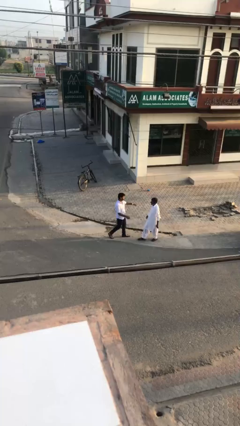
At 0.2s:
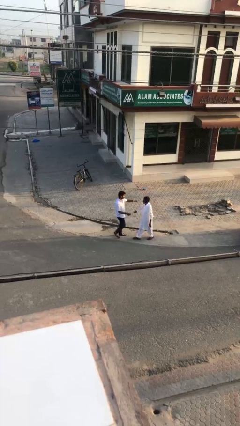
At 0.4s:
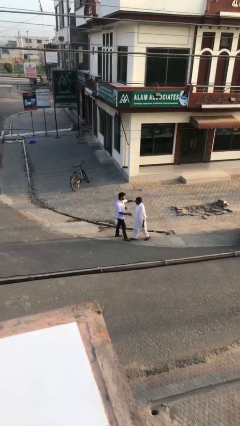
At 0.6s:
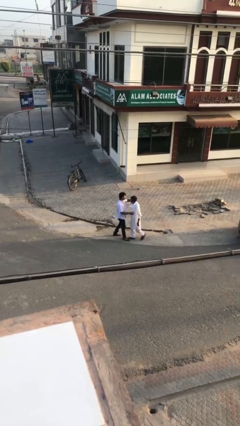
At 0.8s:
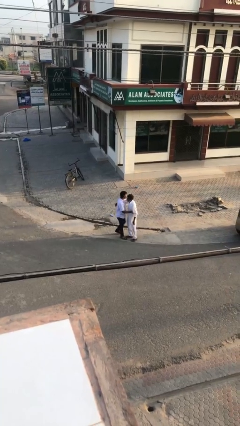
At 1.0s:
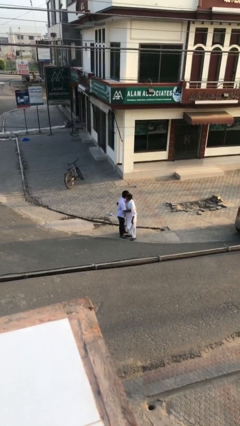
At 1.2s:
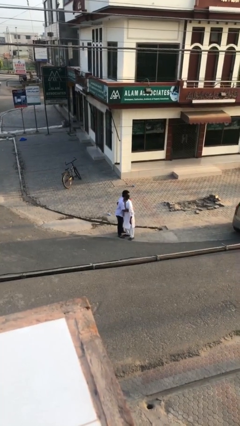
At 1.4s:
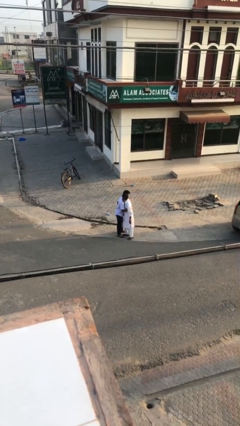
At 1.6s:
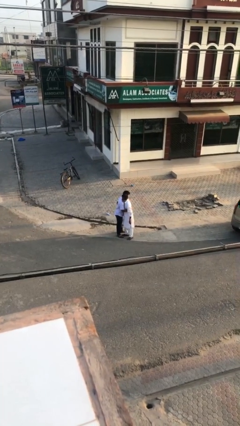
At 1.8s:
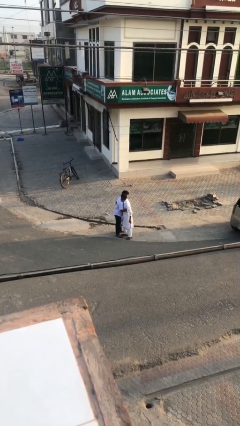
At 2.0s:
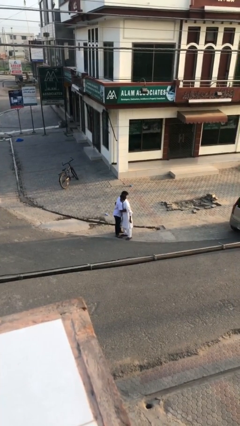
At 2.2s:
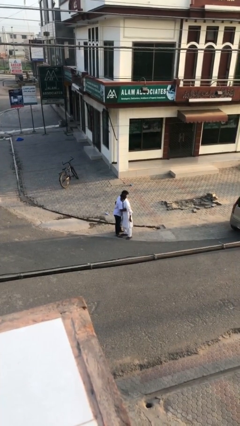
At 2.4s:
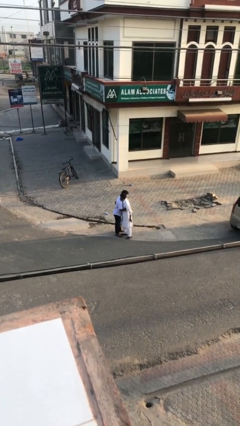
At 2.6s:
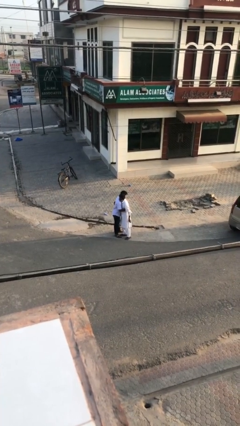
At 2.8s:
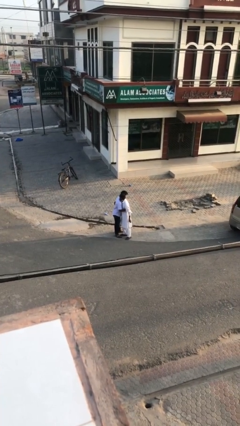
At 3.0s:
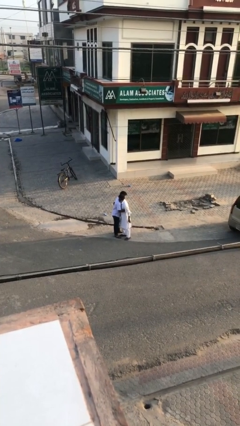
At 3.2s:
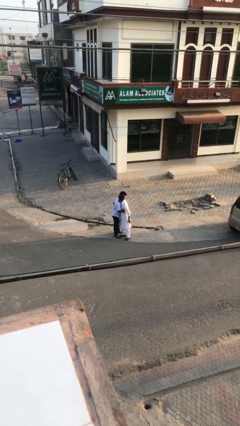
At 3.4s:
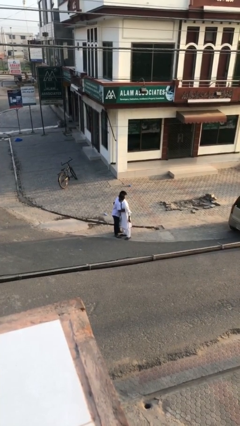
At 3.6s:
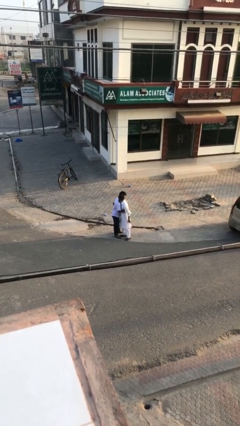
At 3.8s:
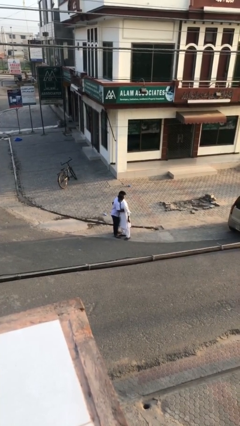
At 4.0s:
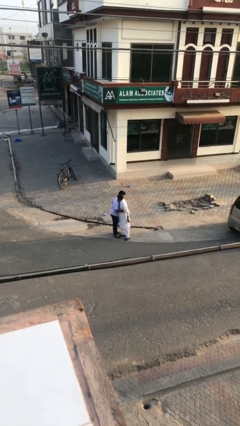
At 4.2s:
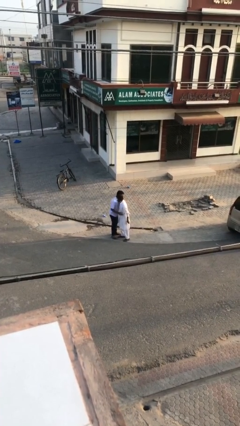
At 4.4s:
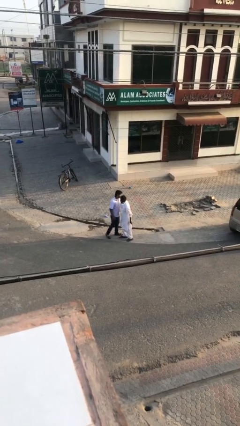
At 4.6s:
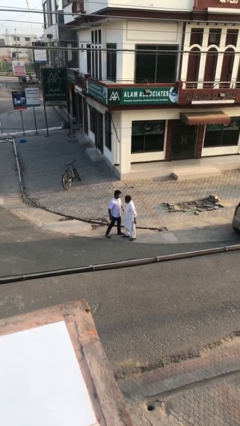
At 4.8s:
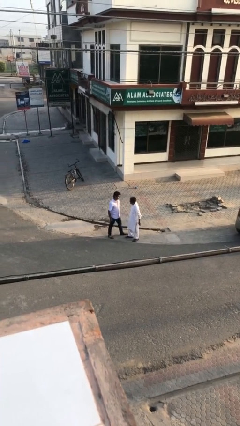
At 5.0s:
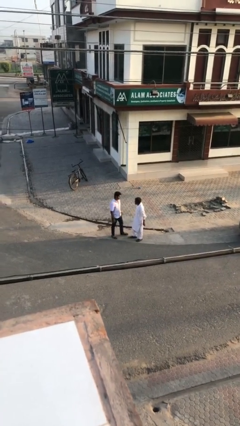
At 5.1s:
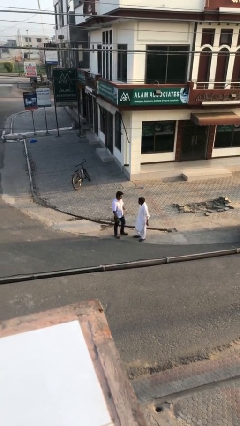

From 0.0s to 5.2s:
person embraces person

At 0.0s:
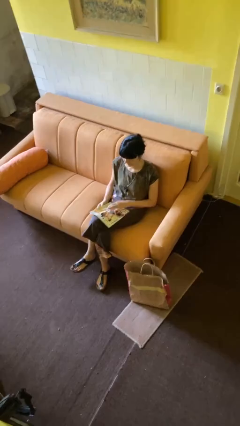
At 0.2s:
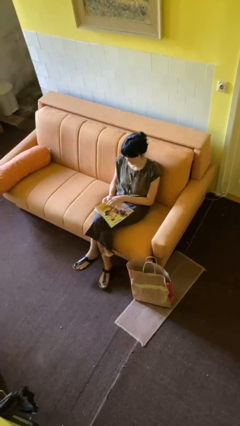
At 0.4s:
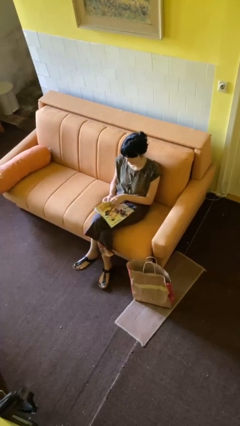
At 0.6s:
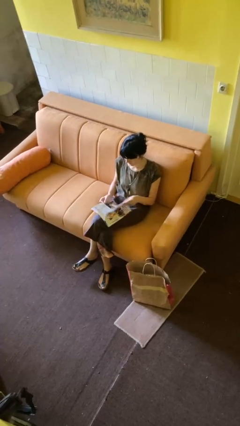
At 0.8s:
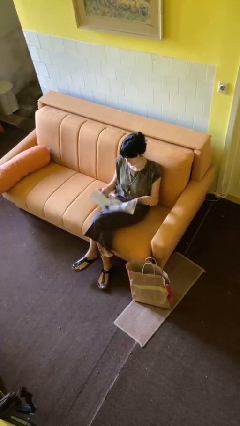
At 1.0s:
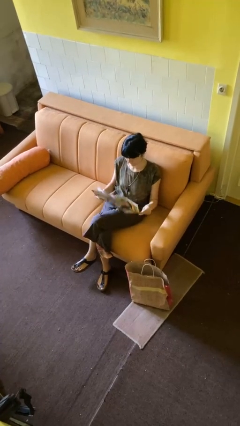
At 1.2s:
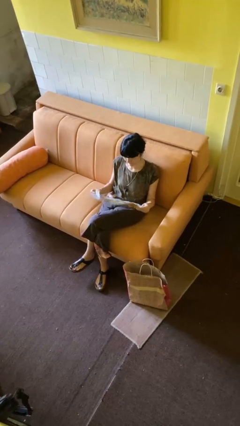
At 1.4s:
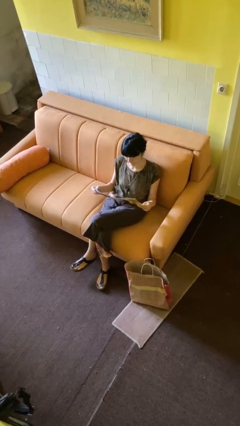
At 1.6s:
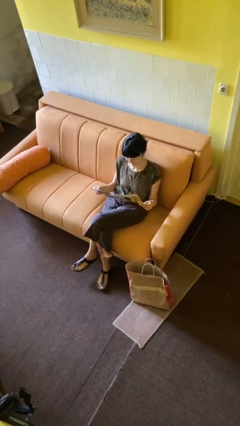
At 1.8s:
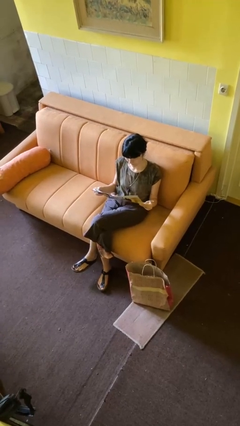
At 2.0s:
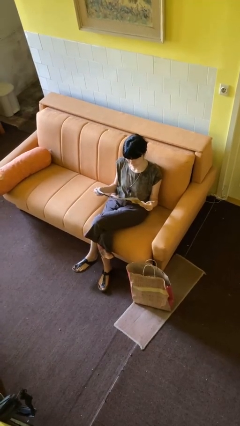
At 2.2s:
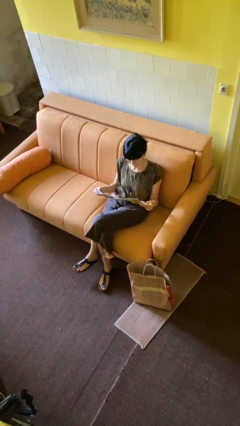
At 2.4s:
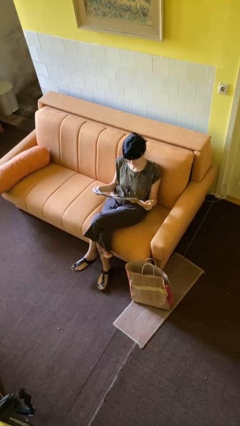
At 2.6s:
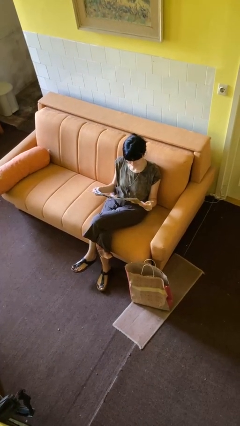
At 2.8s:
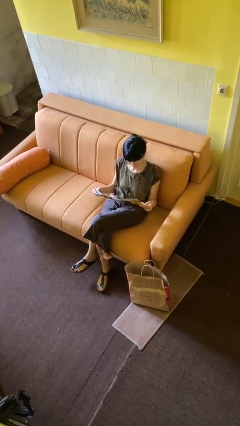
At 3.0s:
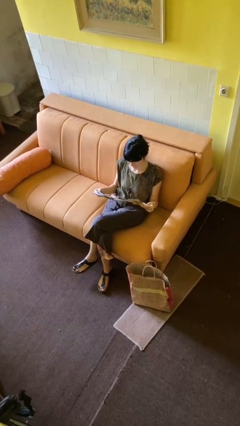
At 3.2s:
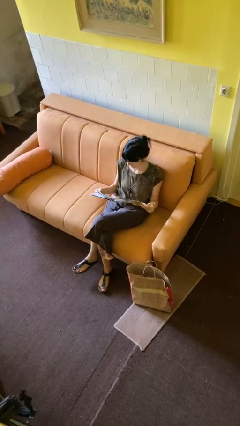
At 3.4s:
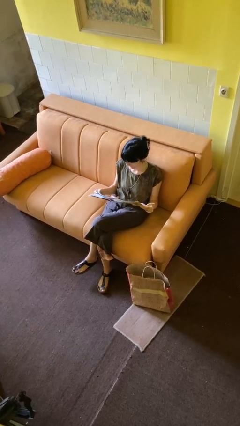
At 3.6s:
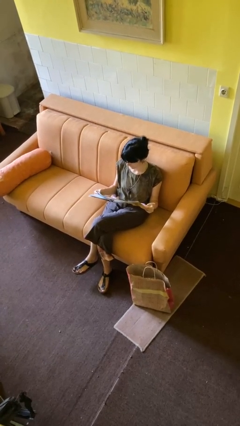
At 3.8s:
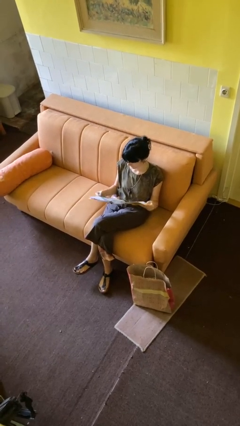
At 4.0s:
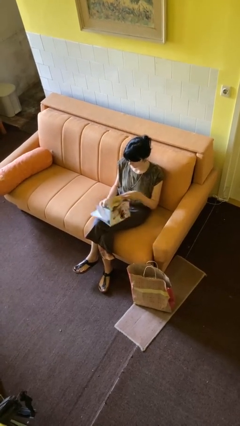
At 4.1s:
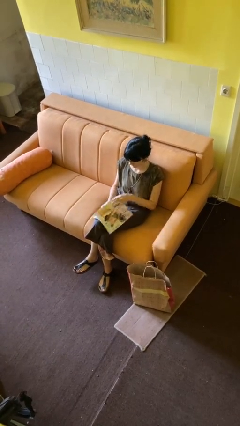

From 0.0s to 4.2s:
person reads magazine

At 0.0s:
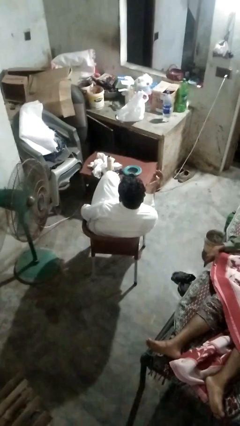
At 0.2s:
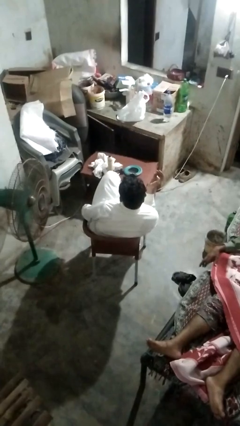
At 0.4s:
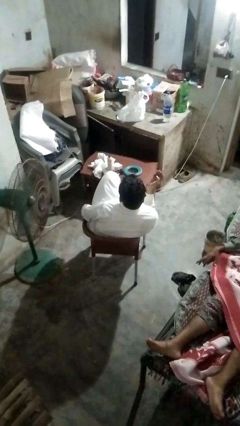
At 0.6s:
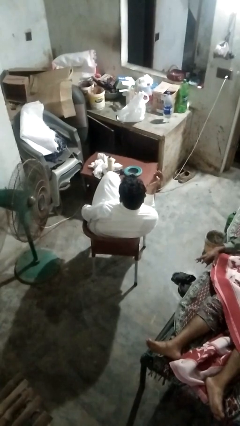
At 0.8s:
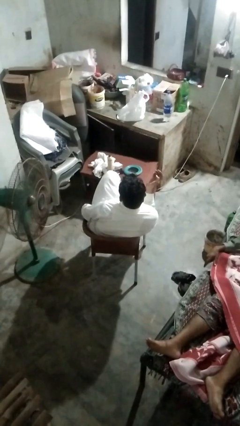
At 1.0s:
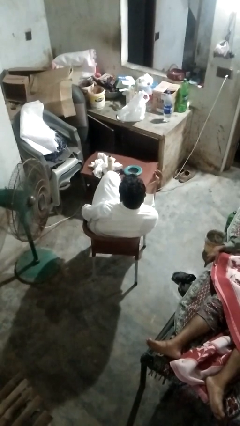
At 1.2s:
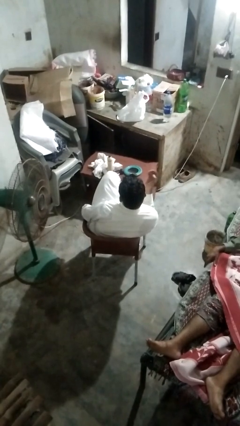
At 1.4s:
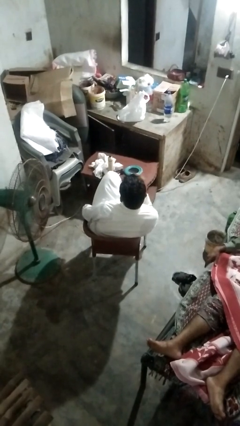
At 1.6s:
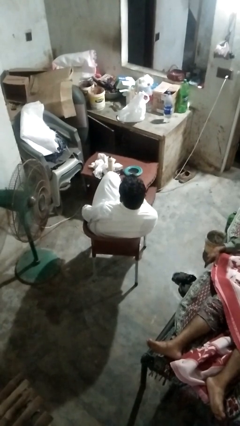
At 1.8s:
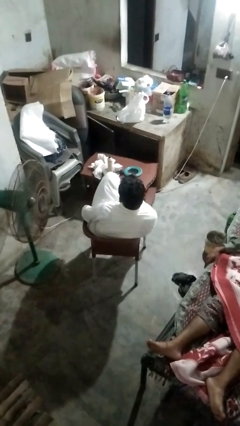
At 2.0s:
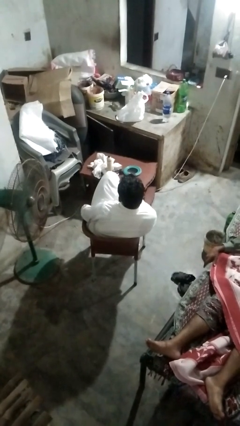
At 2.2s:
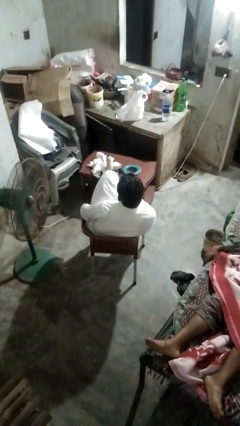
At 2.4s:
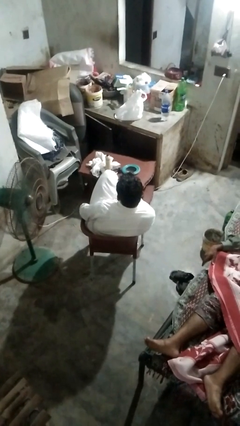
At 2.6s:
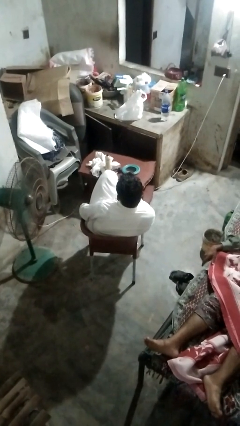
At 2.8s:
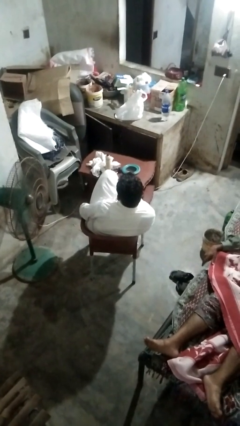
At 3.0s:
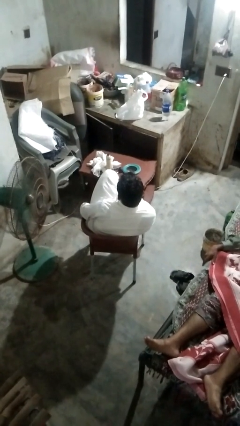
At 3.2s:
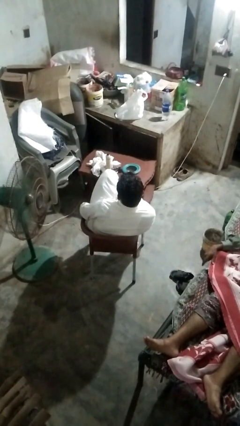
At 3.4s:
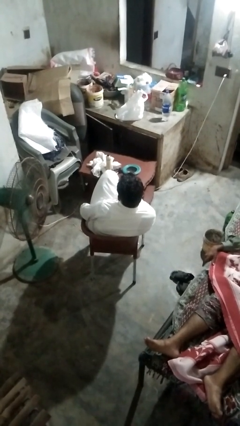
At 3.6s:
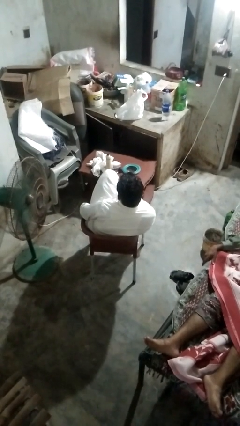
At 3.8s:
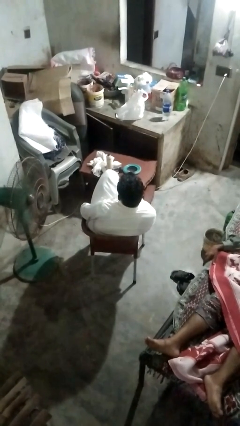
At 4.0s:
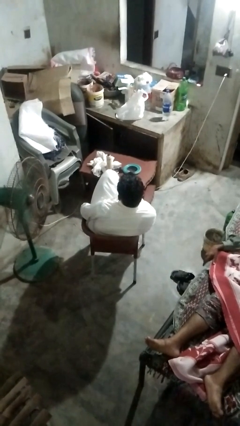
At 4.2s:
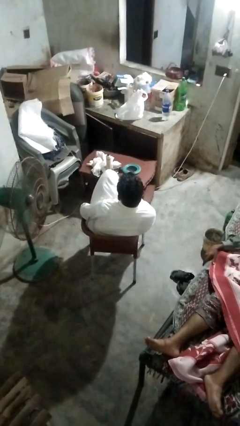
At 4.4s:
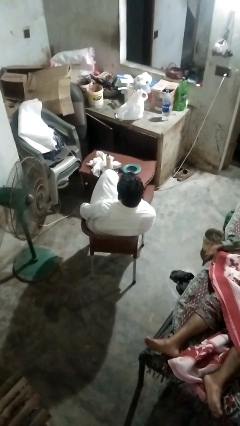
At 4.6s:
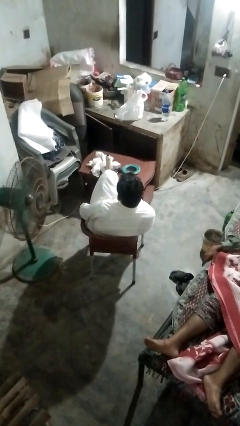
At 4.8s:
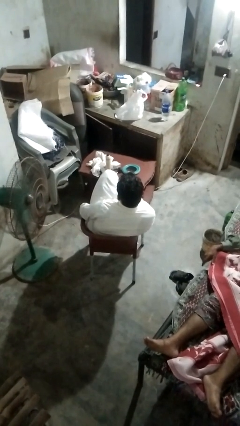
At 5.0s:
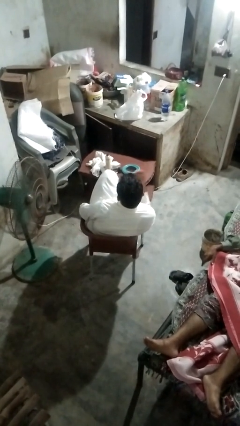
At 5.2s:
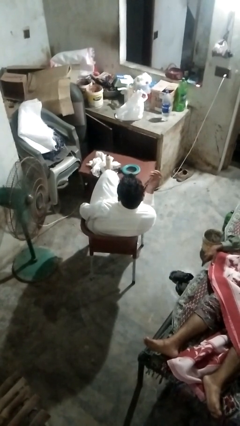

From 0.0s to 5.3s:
person licks fingers

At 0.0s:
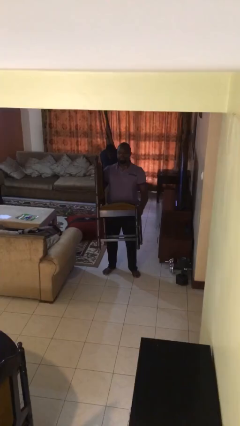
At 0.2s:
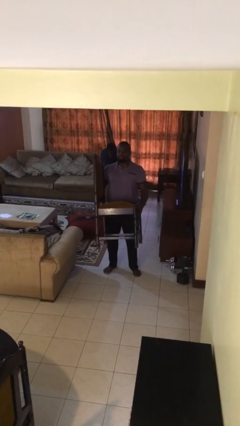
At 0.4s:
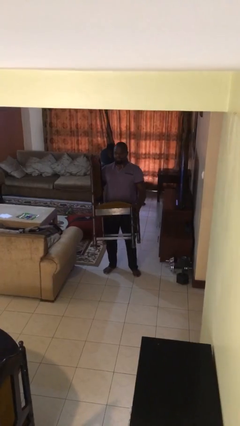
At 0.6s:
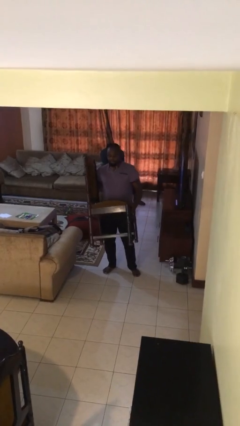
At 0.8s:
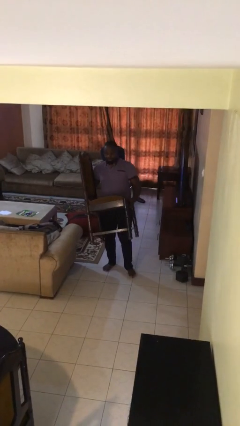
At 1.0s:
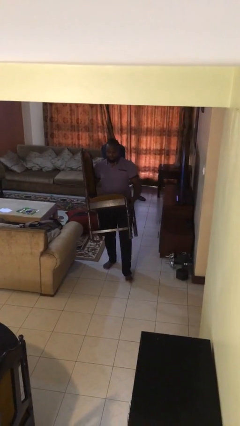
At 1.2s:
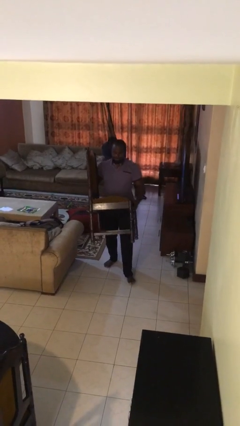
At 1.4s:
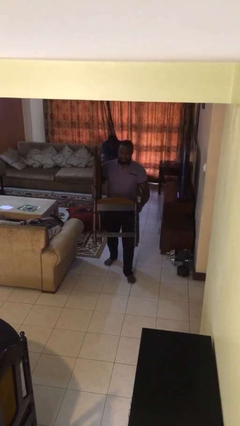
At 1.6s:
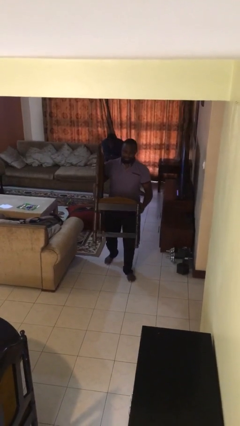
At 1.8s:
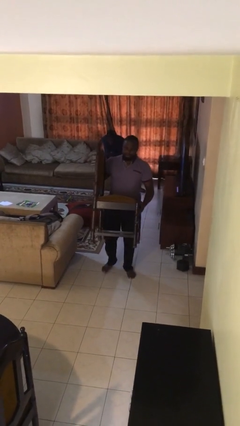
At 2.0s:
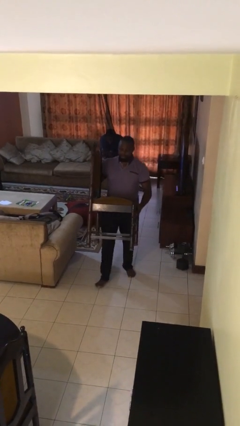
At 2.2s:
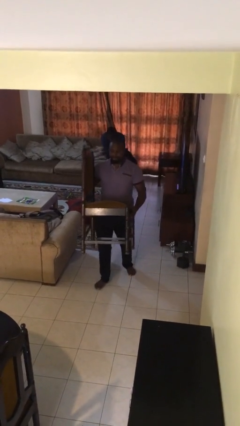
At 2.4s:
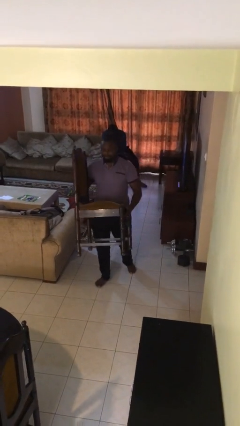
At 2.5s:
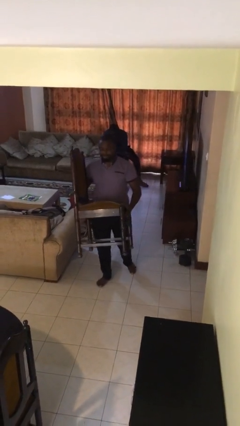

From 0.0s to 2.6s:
person carries heavy object

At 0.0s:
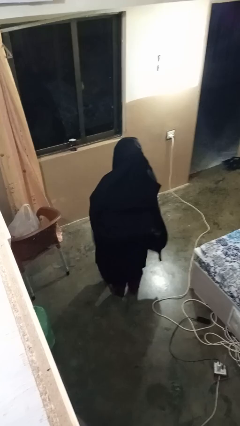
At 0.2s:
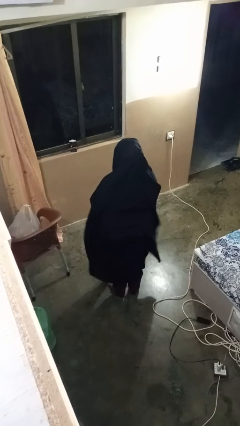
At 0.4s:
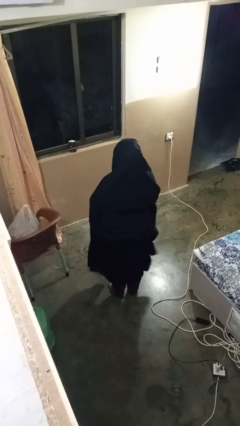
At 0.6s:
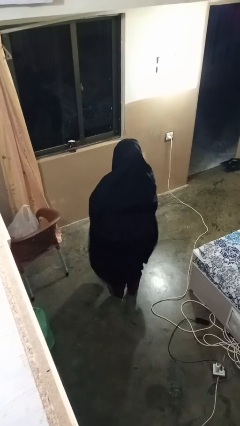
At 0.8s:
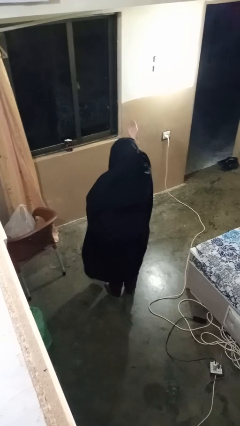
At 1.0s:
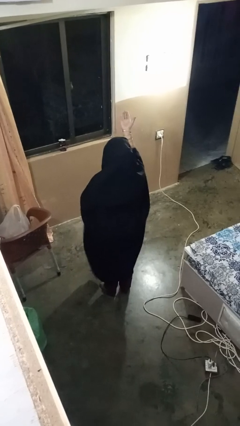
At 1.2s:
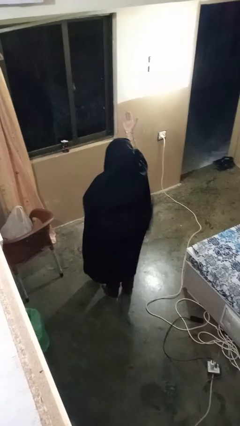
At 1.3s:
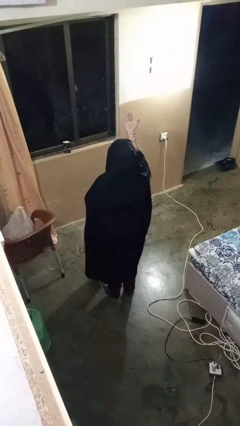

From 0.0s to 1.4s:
person gestures swipe up
